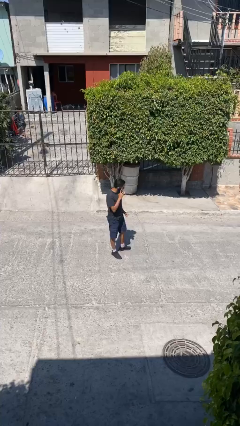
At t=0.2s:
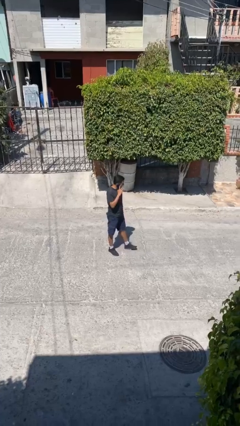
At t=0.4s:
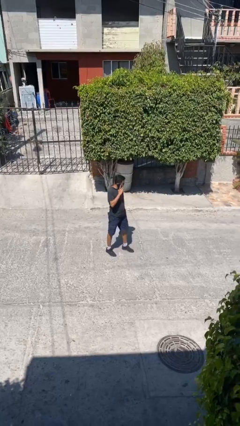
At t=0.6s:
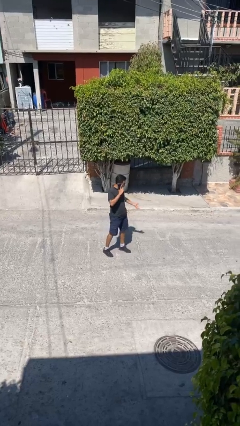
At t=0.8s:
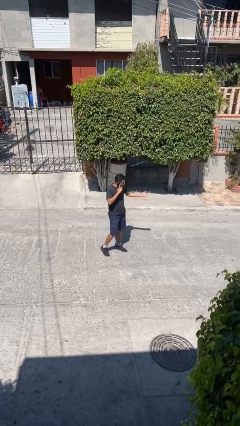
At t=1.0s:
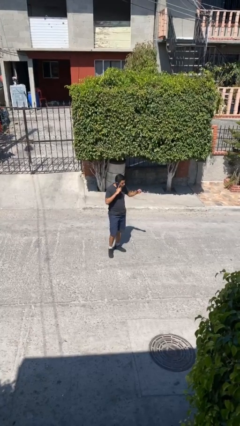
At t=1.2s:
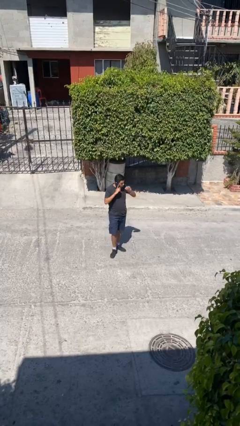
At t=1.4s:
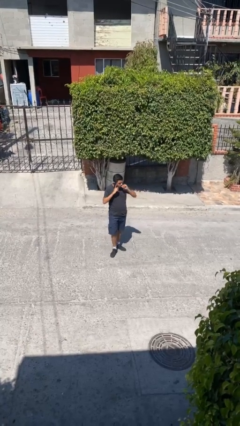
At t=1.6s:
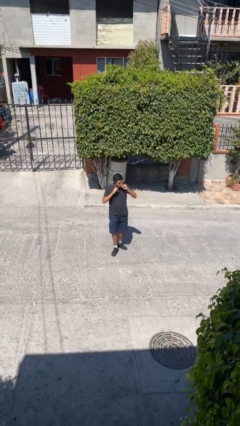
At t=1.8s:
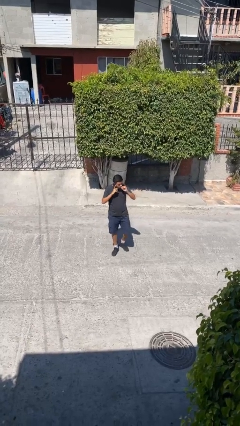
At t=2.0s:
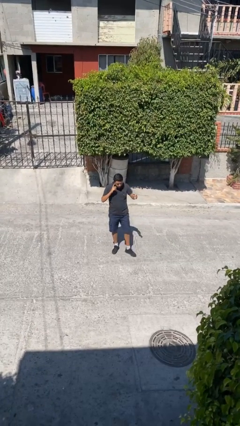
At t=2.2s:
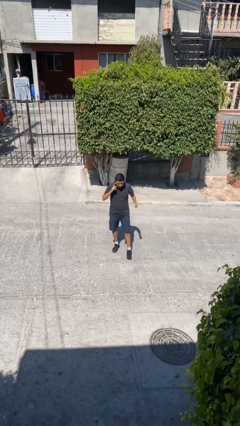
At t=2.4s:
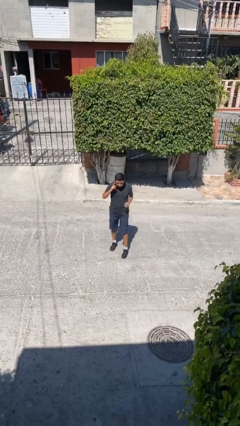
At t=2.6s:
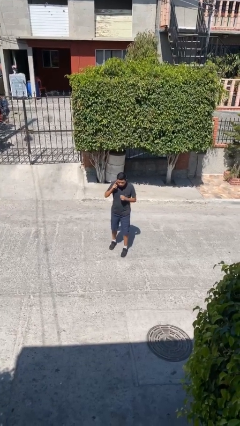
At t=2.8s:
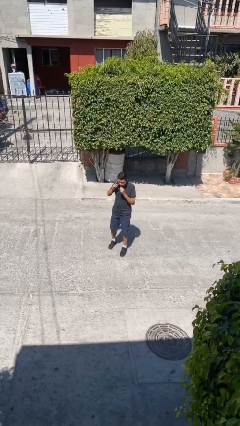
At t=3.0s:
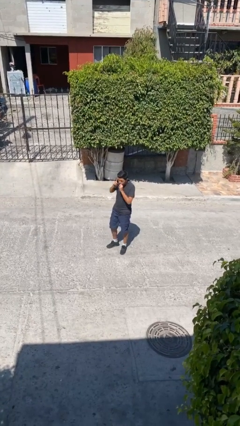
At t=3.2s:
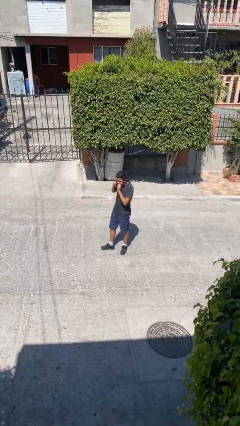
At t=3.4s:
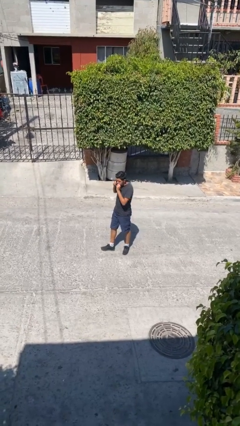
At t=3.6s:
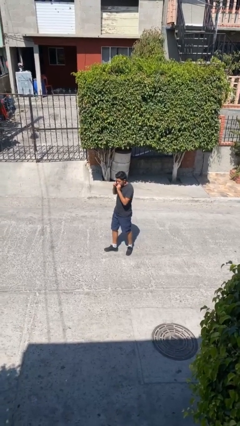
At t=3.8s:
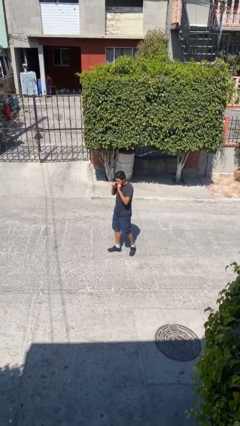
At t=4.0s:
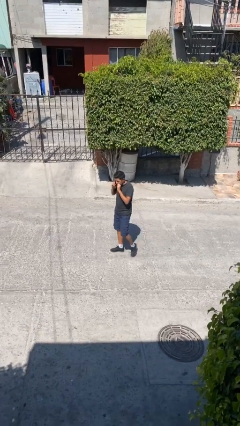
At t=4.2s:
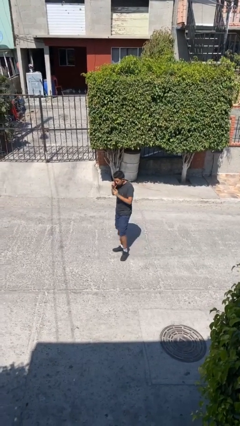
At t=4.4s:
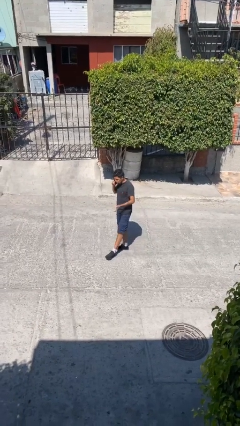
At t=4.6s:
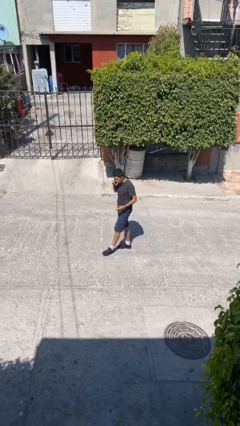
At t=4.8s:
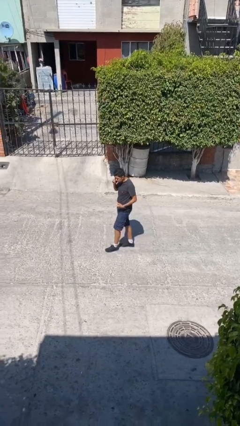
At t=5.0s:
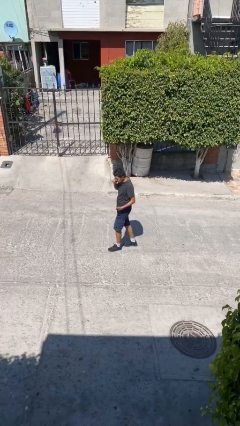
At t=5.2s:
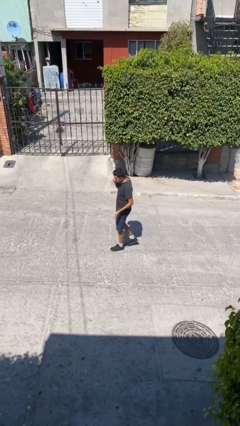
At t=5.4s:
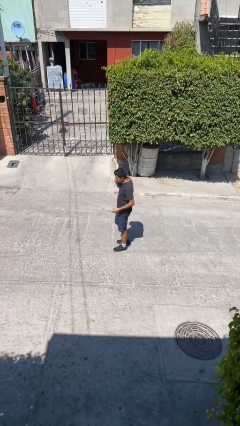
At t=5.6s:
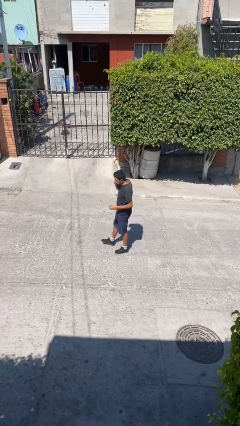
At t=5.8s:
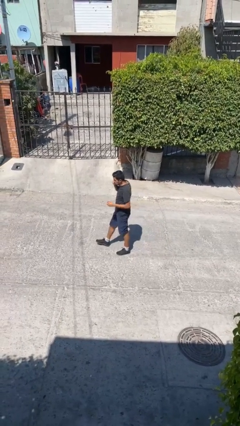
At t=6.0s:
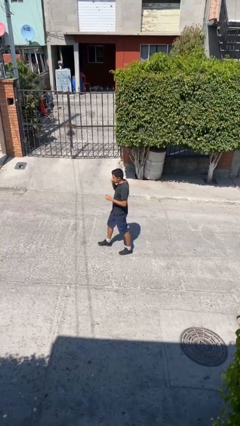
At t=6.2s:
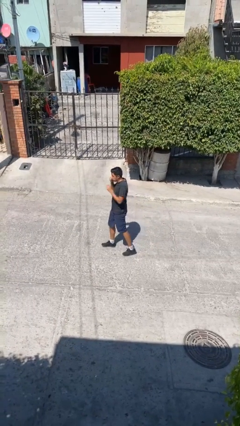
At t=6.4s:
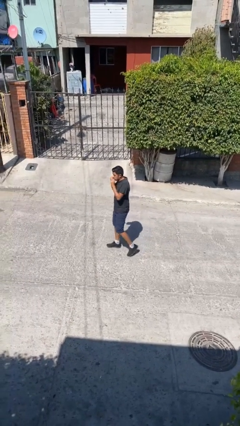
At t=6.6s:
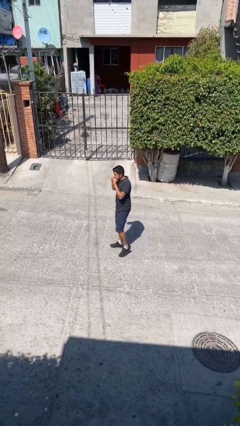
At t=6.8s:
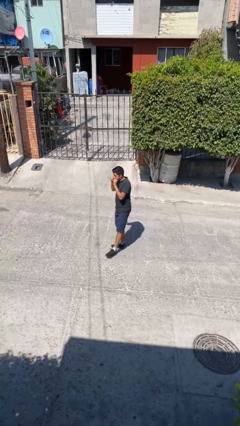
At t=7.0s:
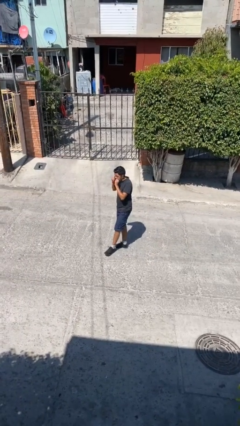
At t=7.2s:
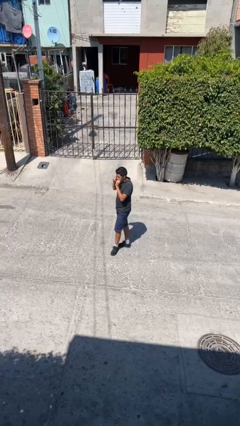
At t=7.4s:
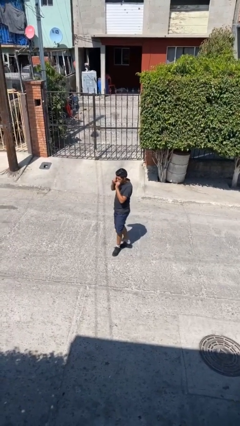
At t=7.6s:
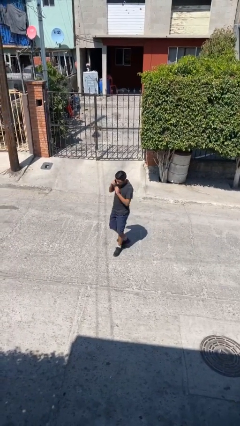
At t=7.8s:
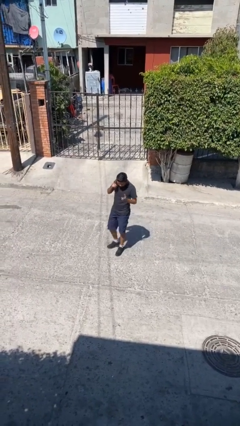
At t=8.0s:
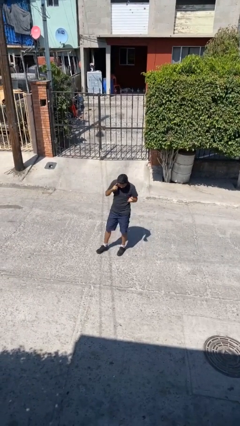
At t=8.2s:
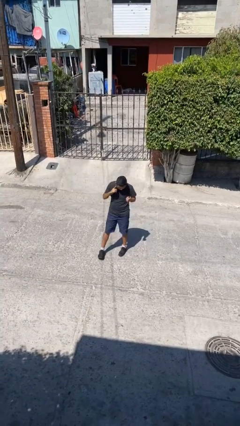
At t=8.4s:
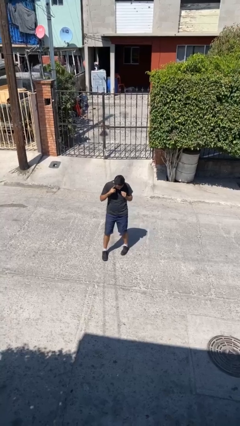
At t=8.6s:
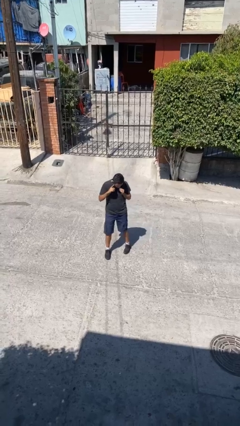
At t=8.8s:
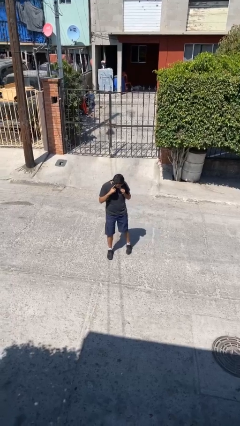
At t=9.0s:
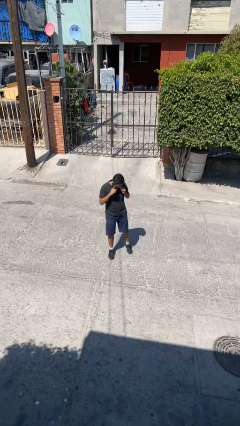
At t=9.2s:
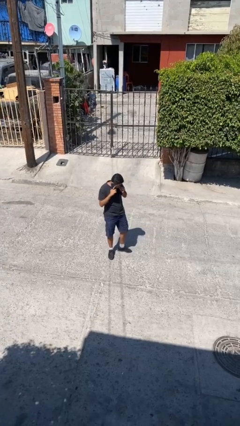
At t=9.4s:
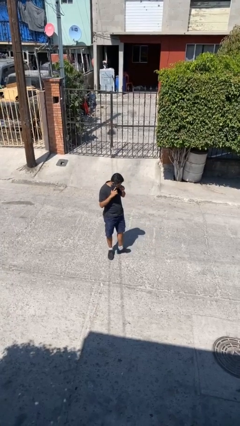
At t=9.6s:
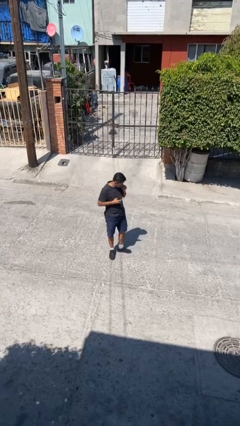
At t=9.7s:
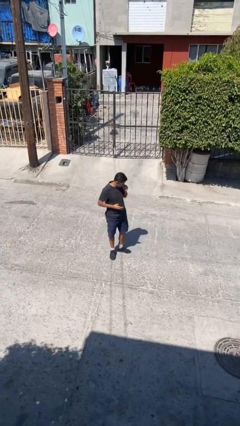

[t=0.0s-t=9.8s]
person talks on phone

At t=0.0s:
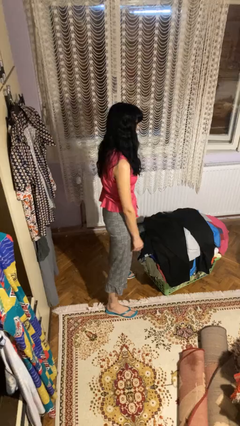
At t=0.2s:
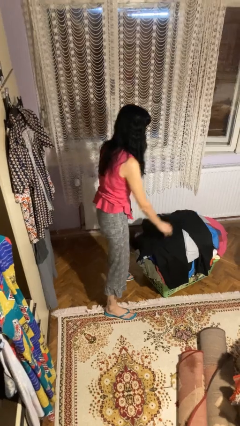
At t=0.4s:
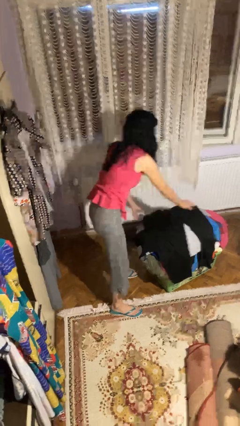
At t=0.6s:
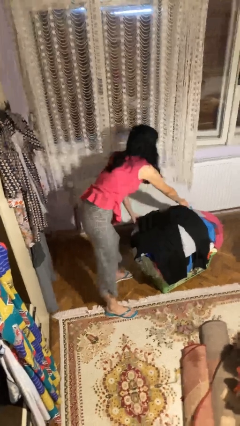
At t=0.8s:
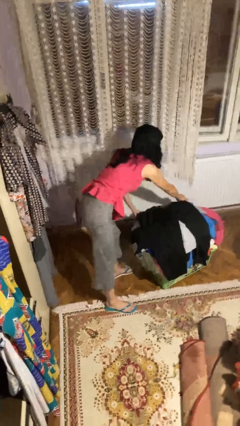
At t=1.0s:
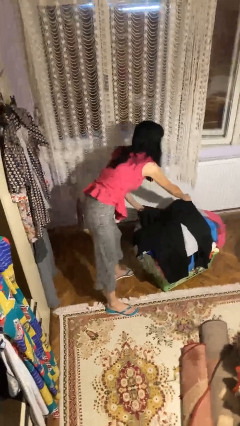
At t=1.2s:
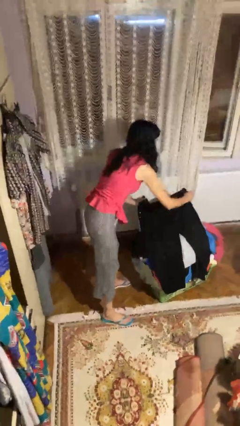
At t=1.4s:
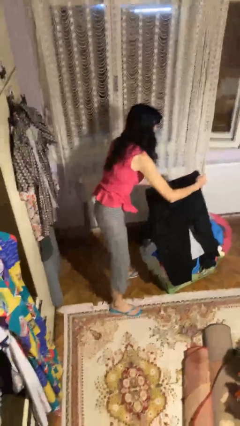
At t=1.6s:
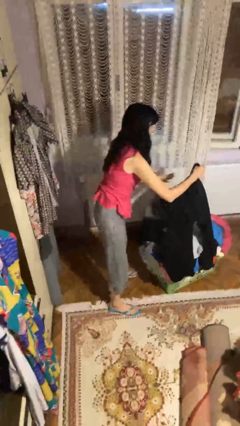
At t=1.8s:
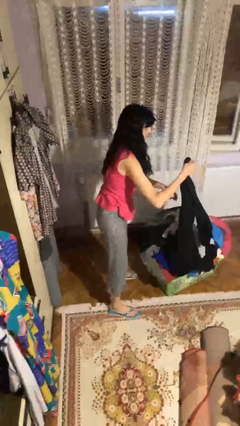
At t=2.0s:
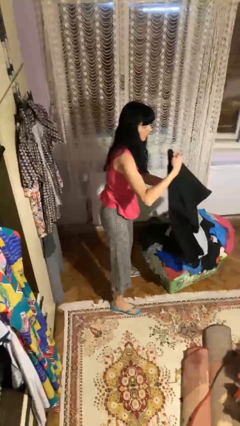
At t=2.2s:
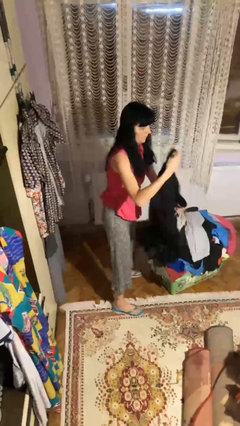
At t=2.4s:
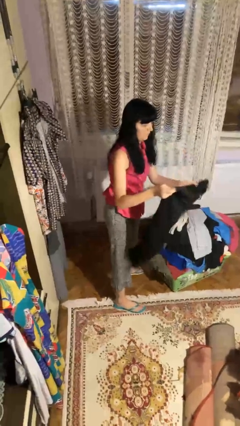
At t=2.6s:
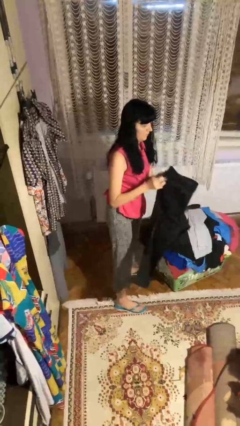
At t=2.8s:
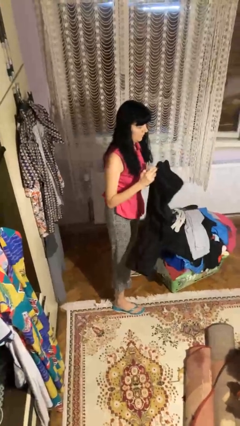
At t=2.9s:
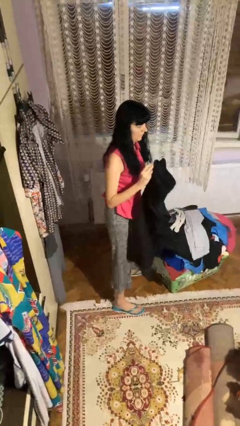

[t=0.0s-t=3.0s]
person folds pants

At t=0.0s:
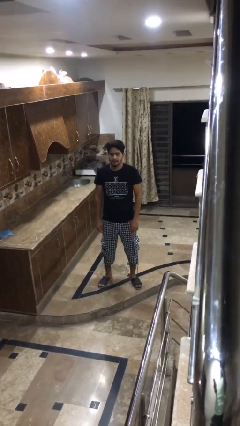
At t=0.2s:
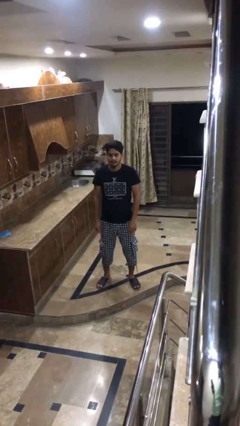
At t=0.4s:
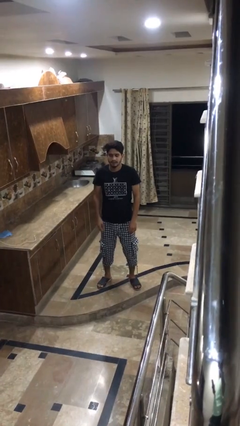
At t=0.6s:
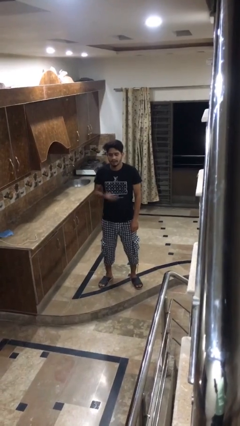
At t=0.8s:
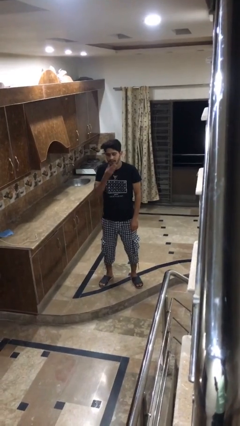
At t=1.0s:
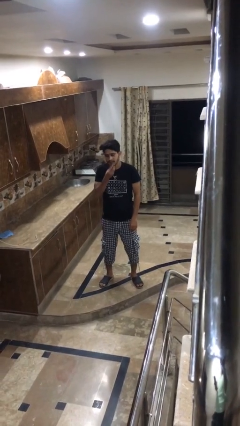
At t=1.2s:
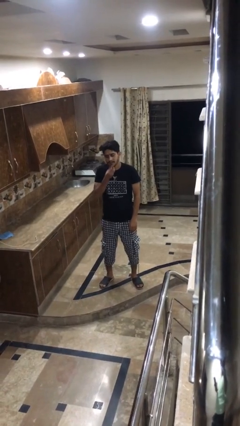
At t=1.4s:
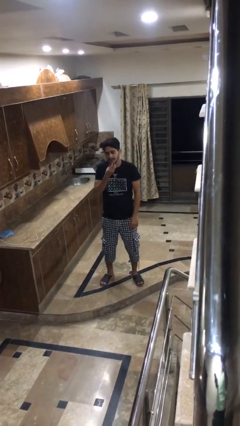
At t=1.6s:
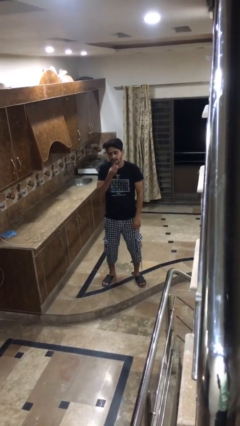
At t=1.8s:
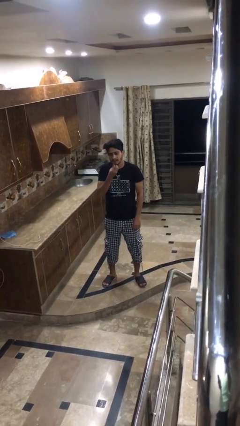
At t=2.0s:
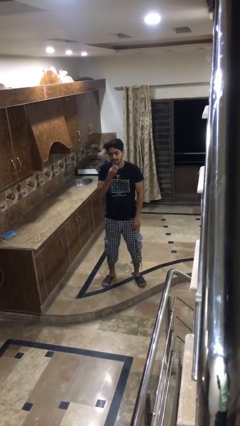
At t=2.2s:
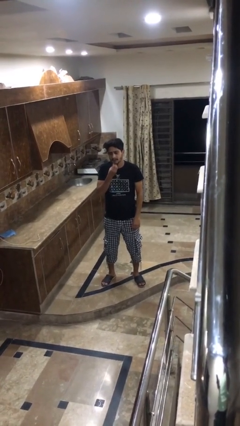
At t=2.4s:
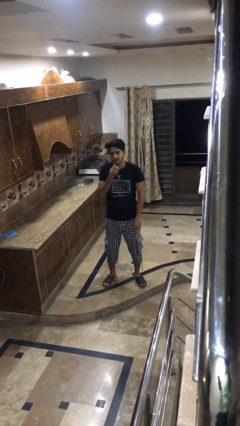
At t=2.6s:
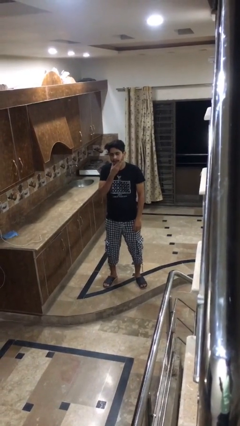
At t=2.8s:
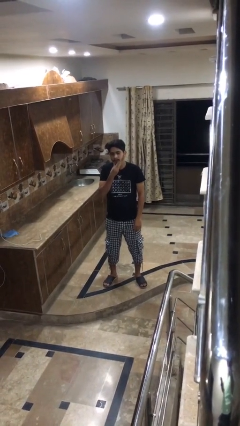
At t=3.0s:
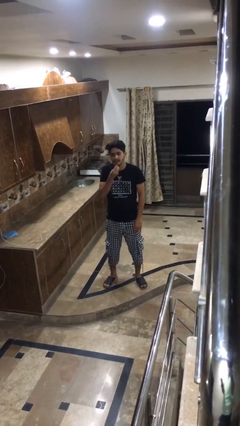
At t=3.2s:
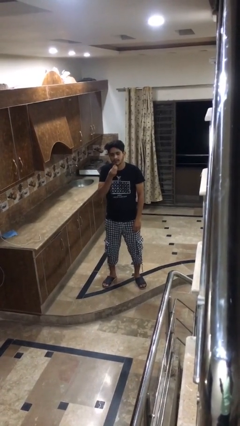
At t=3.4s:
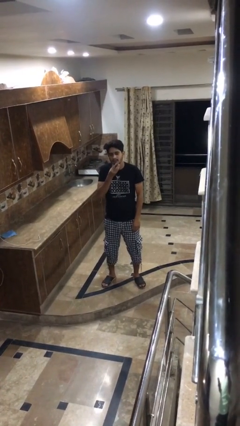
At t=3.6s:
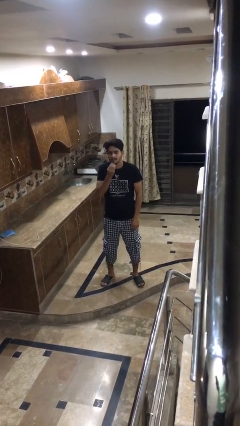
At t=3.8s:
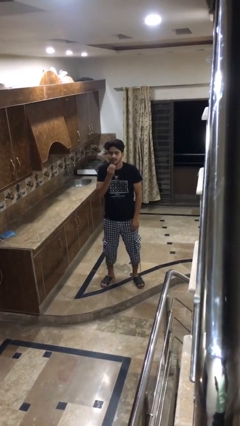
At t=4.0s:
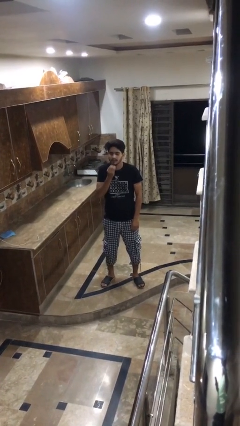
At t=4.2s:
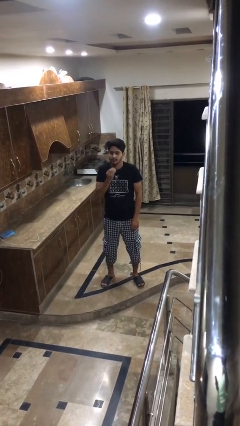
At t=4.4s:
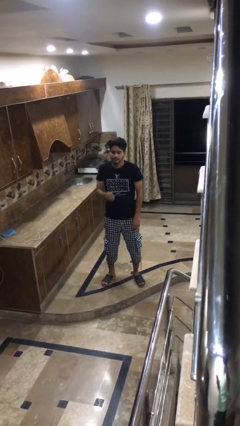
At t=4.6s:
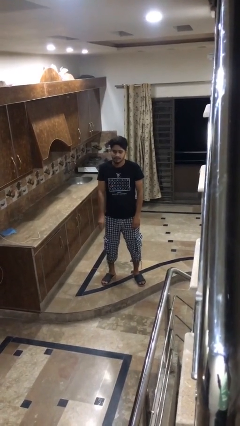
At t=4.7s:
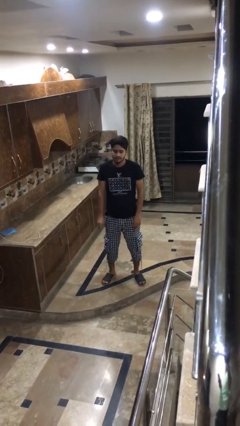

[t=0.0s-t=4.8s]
person strokes chin

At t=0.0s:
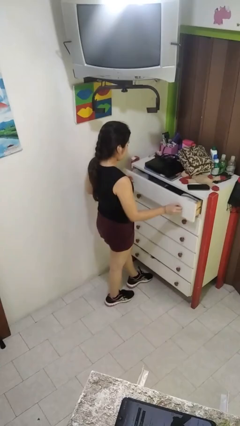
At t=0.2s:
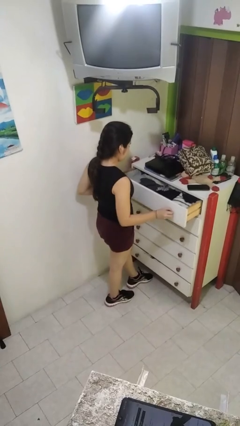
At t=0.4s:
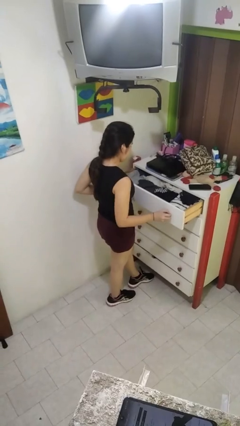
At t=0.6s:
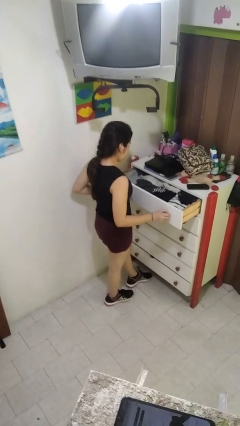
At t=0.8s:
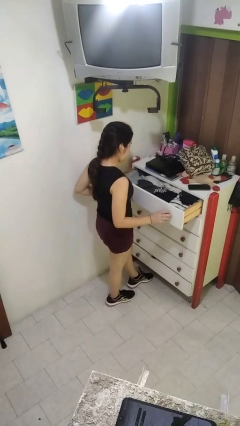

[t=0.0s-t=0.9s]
person opens dresser drawer
